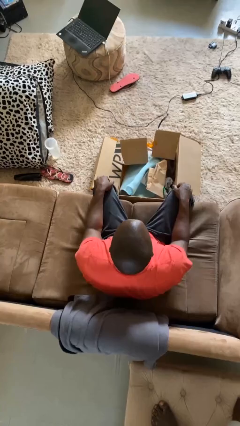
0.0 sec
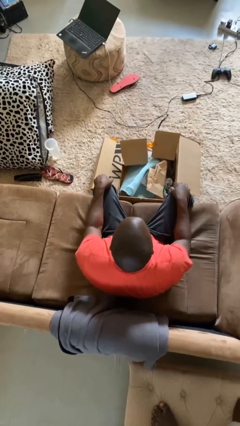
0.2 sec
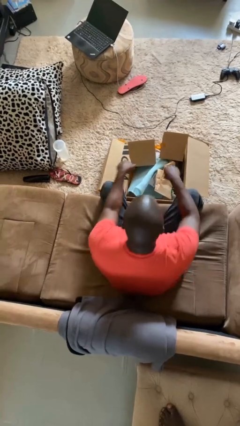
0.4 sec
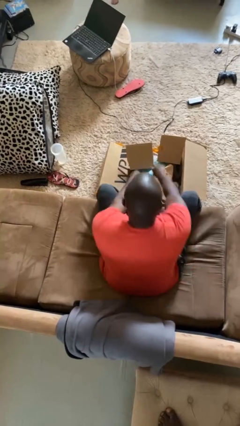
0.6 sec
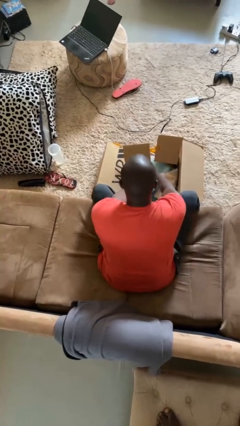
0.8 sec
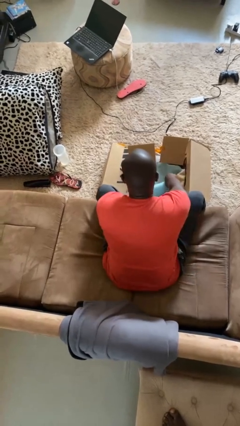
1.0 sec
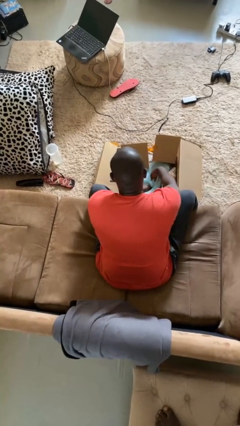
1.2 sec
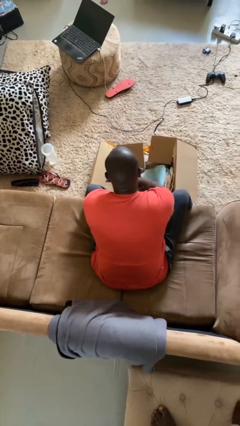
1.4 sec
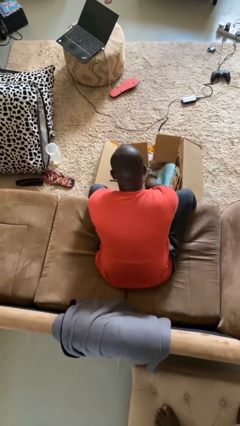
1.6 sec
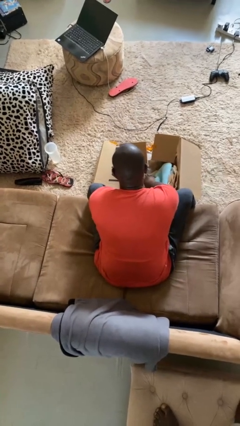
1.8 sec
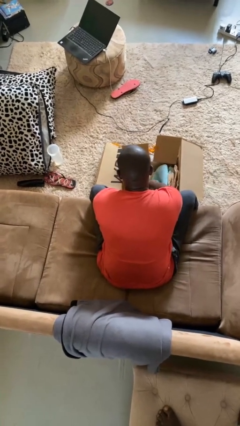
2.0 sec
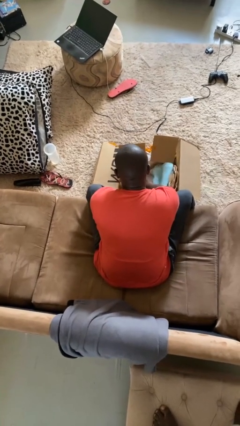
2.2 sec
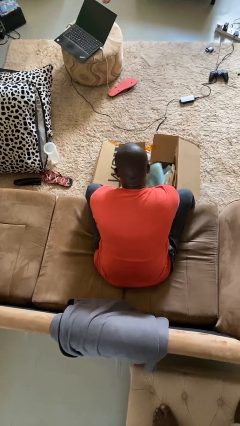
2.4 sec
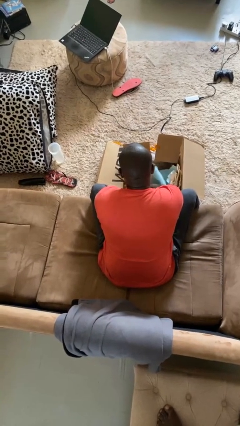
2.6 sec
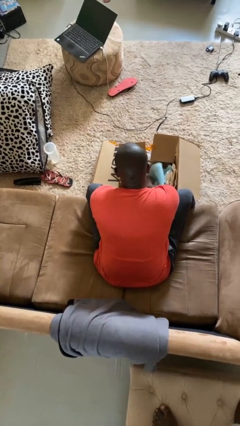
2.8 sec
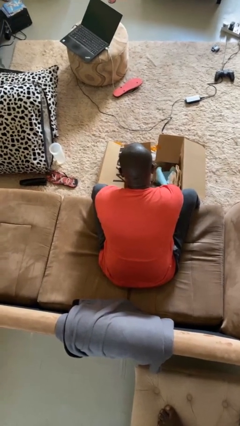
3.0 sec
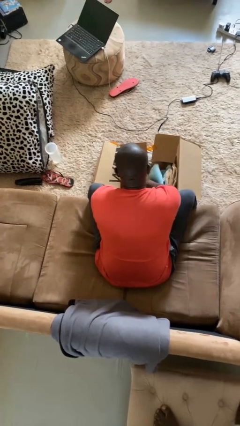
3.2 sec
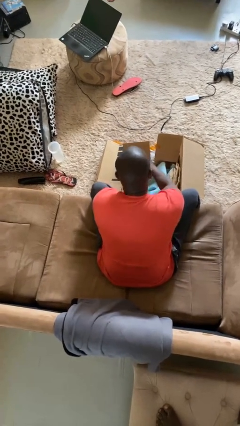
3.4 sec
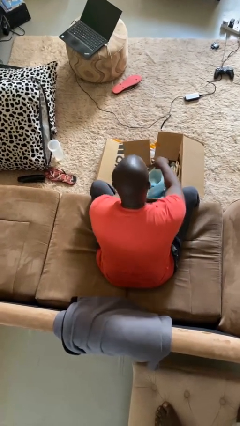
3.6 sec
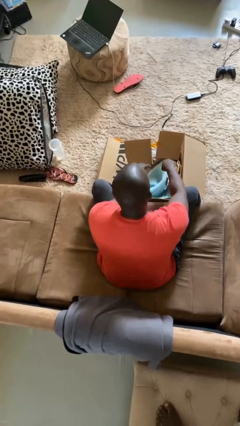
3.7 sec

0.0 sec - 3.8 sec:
person searches in box

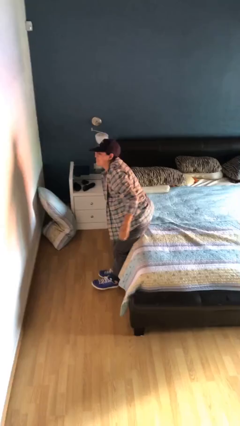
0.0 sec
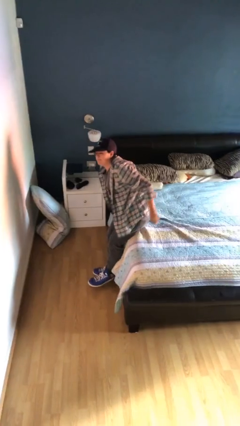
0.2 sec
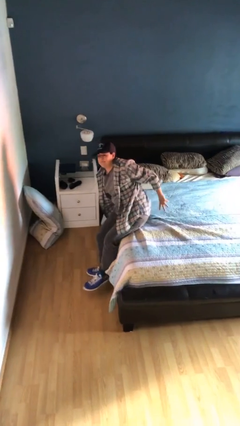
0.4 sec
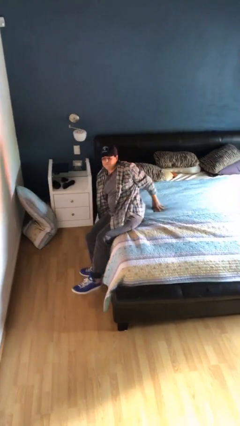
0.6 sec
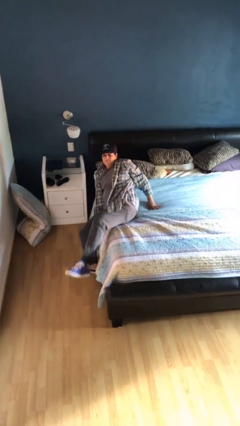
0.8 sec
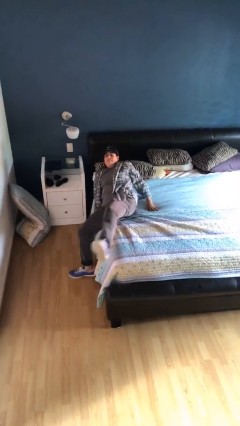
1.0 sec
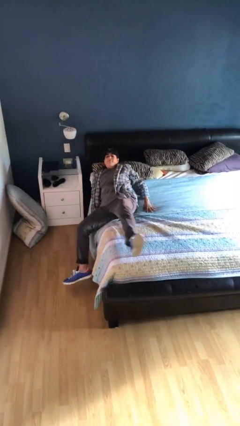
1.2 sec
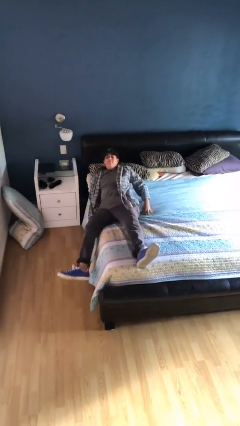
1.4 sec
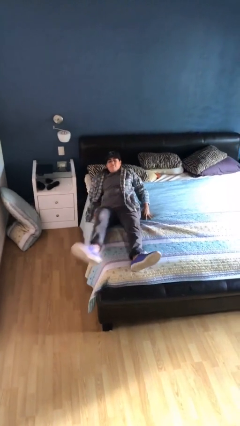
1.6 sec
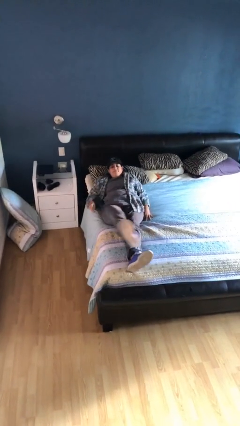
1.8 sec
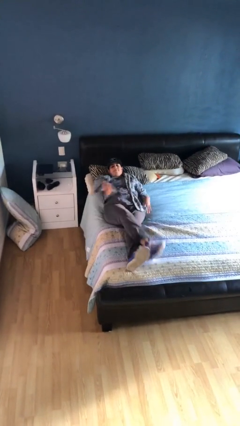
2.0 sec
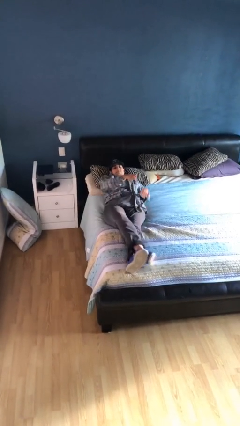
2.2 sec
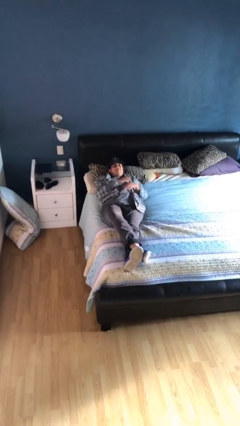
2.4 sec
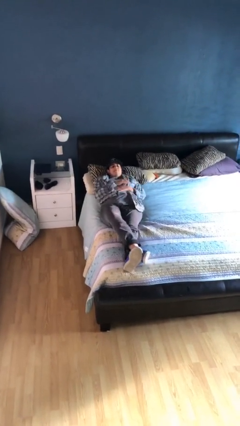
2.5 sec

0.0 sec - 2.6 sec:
person lies down on bed

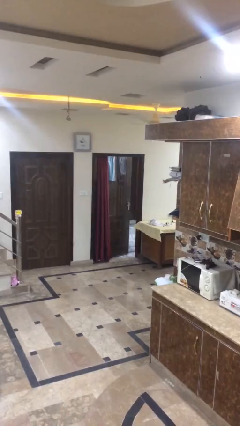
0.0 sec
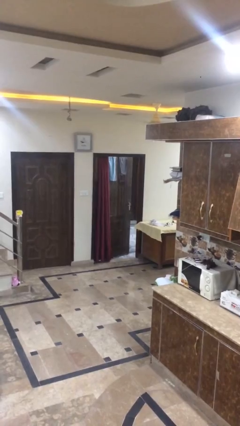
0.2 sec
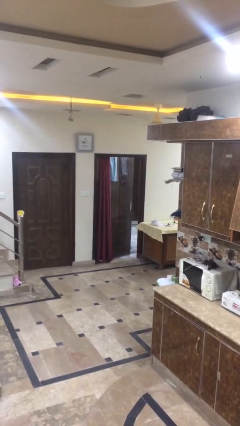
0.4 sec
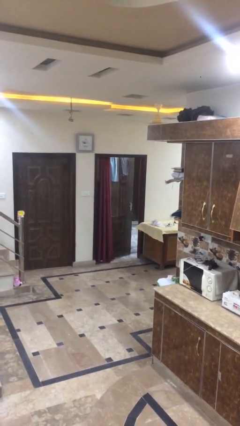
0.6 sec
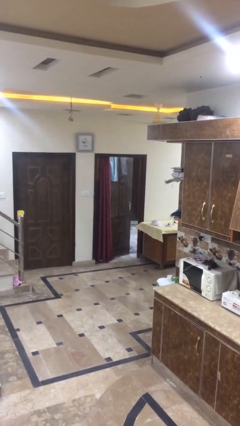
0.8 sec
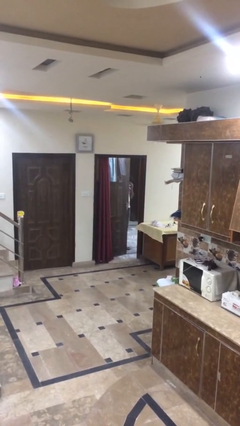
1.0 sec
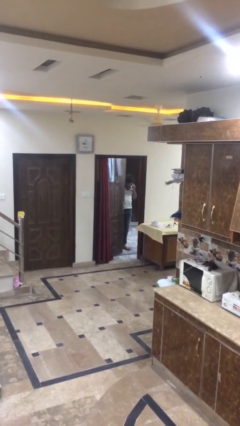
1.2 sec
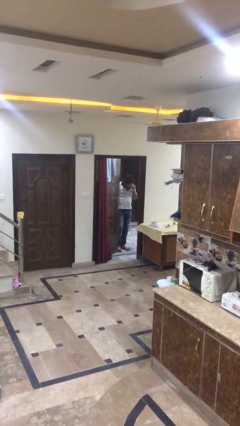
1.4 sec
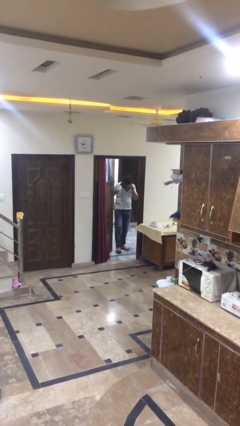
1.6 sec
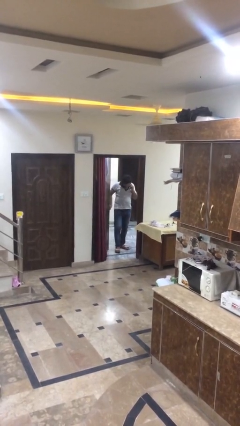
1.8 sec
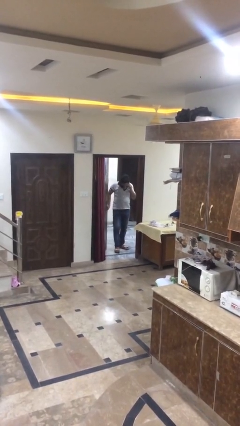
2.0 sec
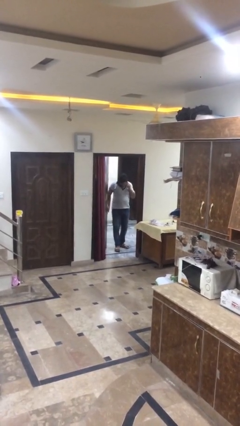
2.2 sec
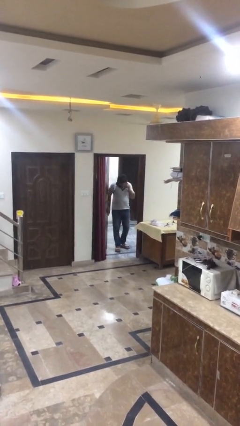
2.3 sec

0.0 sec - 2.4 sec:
person opens facility door

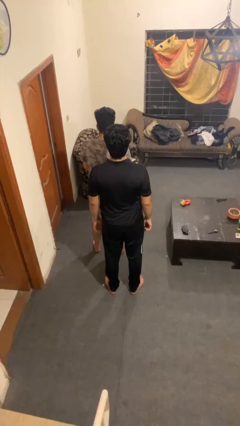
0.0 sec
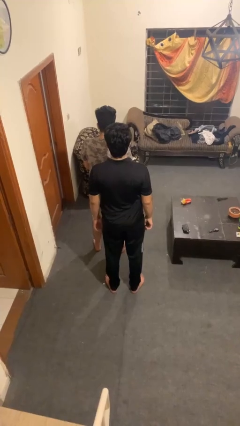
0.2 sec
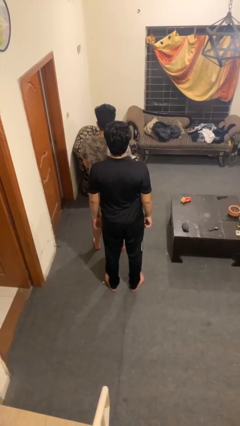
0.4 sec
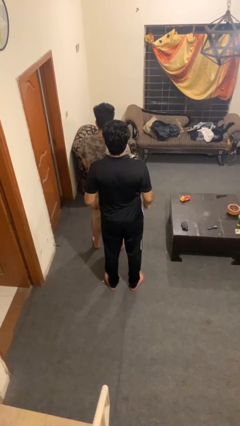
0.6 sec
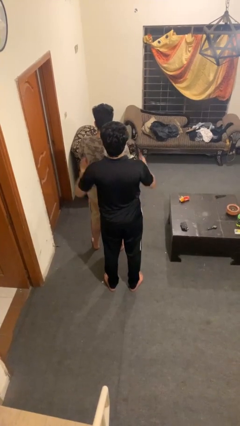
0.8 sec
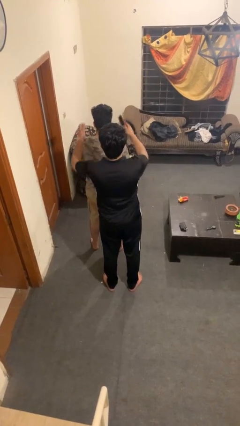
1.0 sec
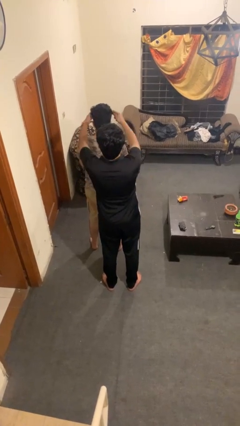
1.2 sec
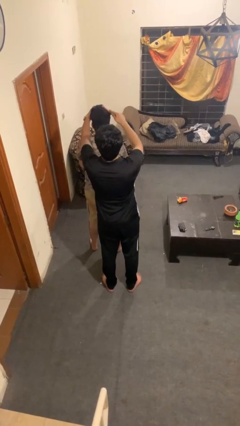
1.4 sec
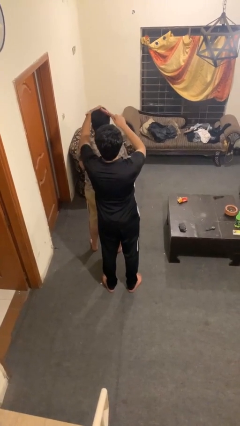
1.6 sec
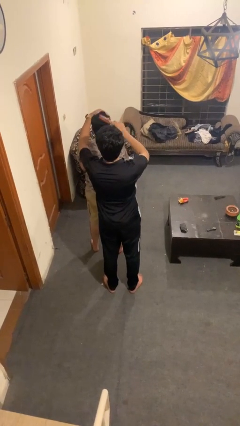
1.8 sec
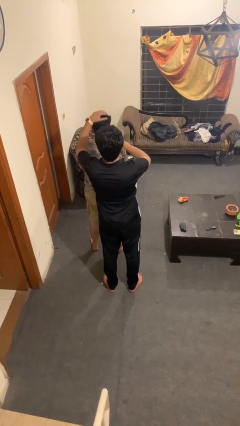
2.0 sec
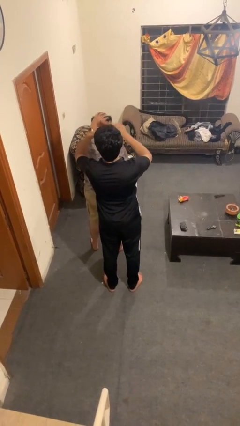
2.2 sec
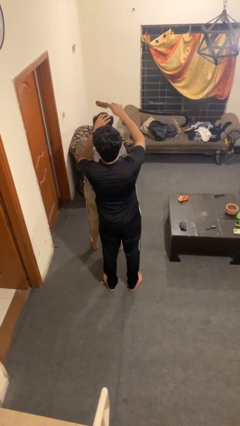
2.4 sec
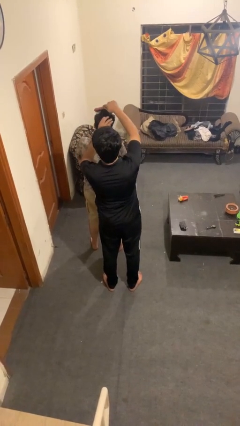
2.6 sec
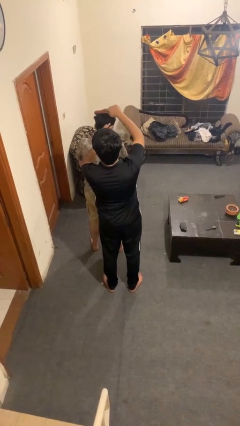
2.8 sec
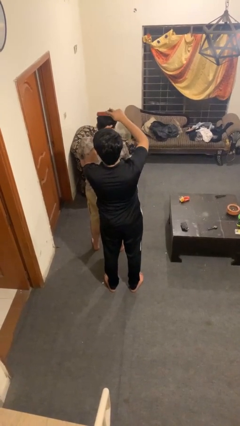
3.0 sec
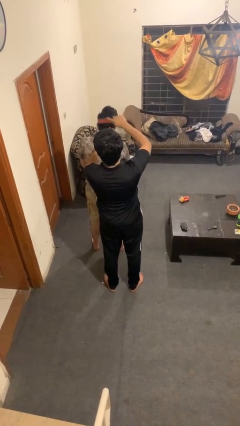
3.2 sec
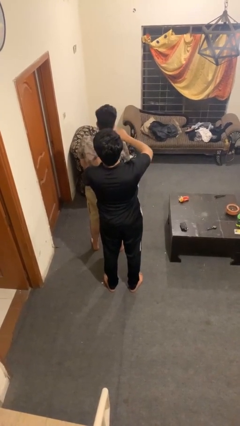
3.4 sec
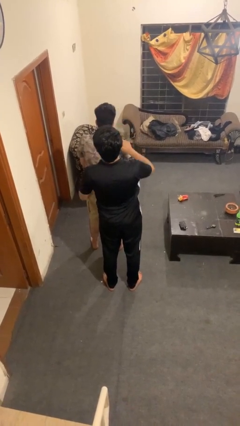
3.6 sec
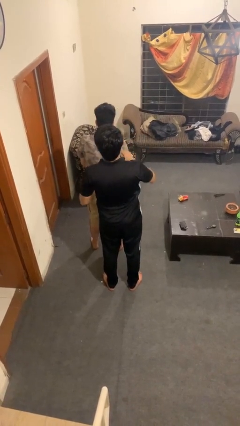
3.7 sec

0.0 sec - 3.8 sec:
person brushes hair of person

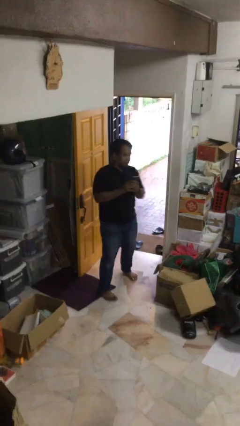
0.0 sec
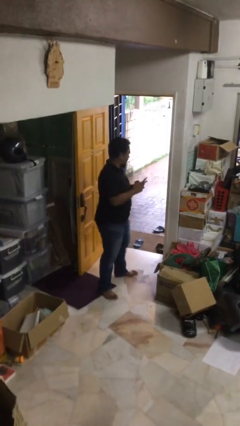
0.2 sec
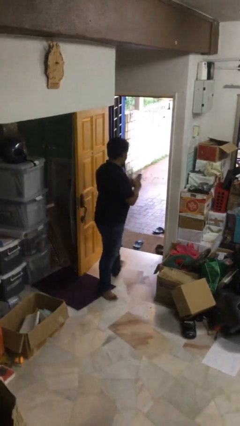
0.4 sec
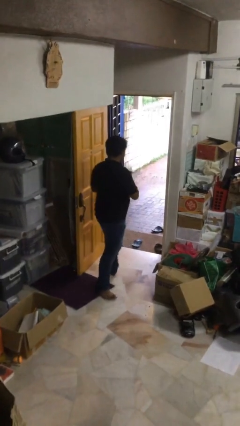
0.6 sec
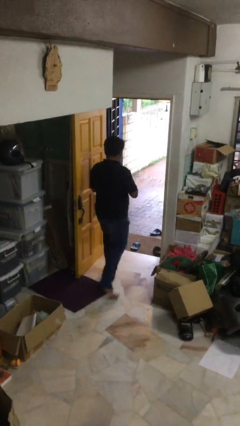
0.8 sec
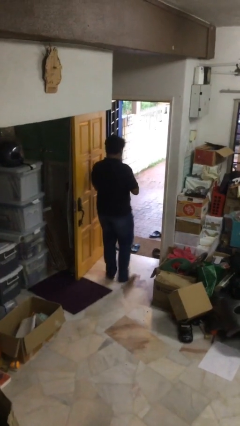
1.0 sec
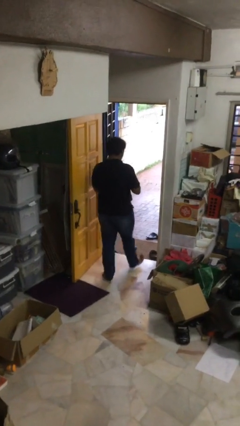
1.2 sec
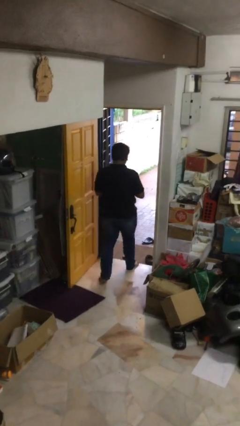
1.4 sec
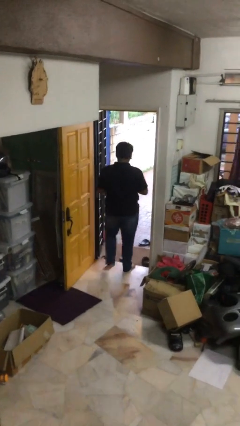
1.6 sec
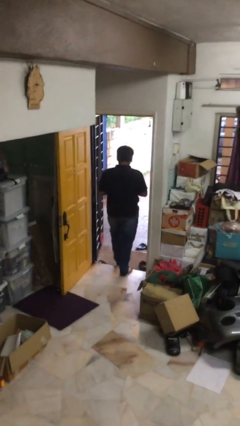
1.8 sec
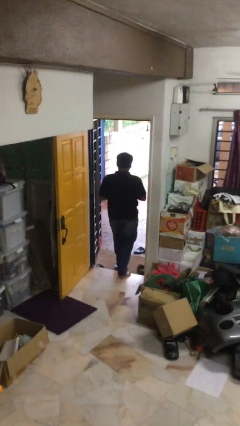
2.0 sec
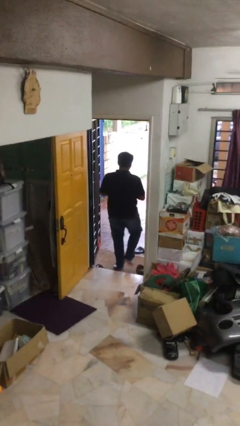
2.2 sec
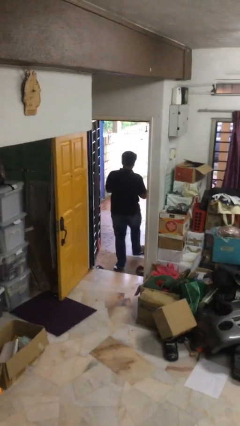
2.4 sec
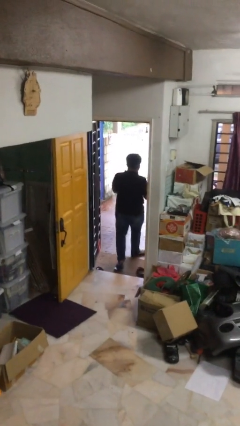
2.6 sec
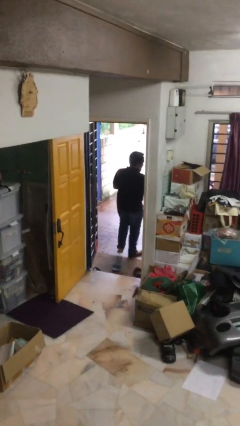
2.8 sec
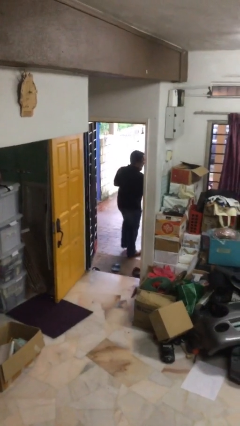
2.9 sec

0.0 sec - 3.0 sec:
person exits scene through structure

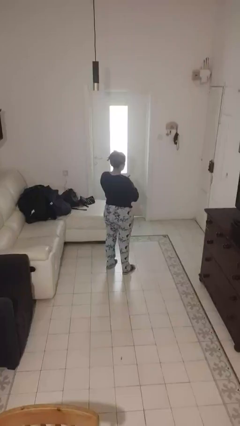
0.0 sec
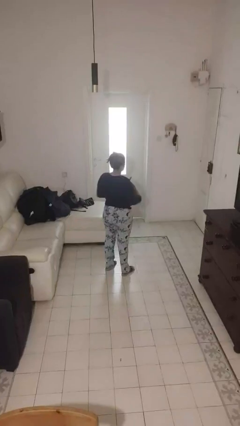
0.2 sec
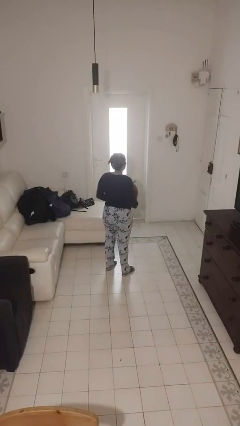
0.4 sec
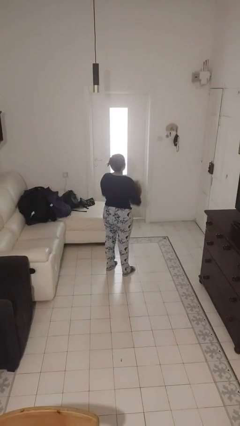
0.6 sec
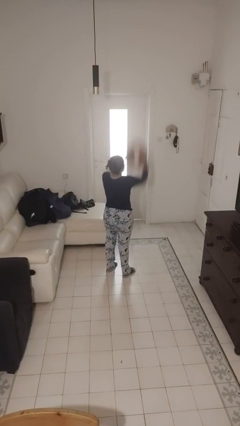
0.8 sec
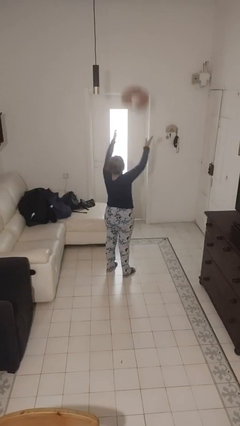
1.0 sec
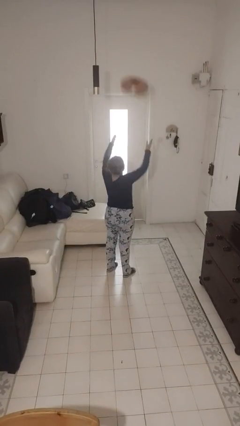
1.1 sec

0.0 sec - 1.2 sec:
person drops object

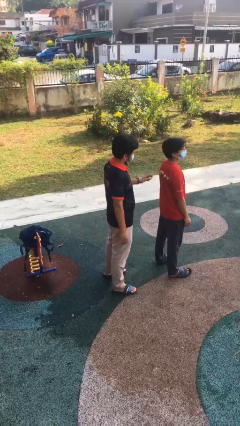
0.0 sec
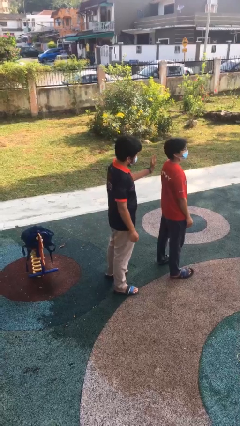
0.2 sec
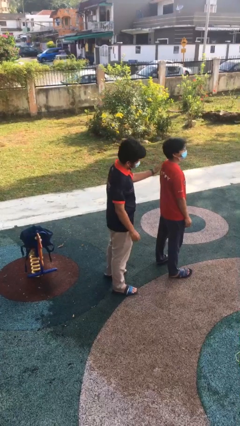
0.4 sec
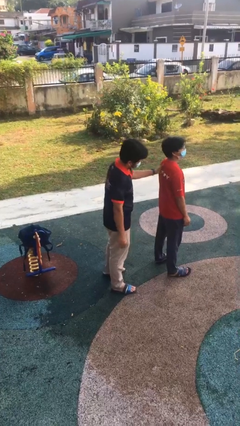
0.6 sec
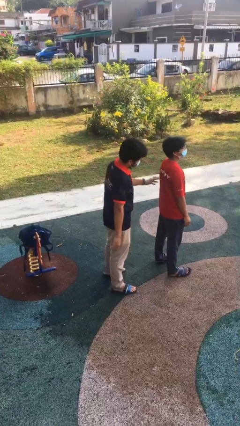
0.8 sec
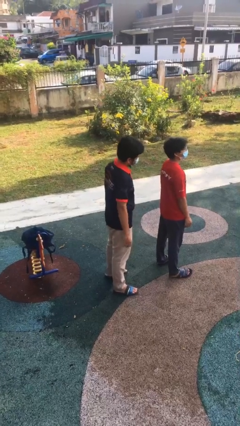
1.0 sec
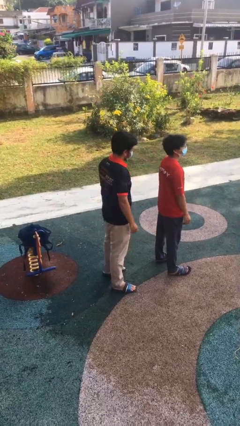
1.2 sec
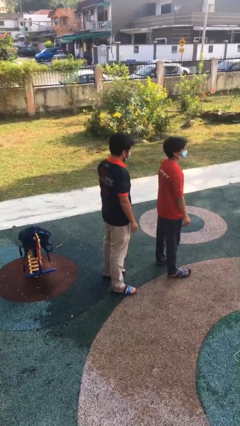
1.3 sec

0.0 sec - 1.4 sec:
person touches back of person
